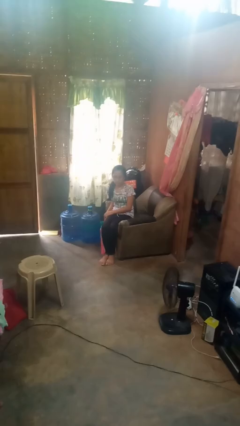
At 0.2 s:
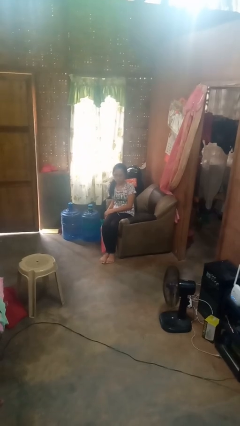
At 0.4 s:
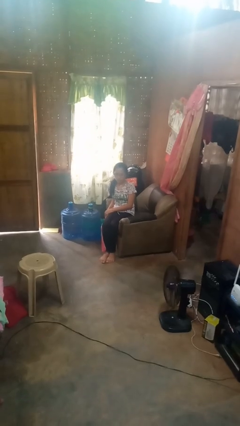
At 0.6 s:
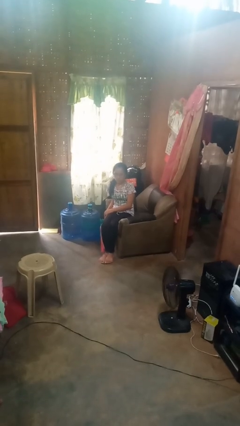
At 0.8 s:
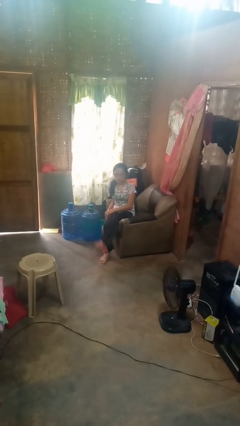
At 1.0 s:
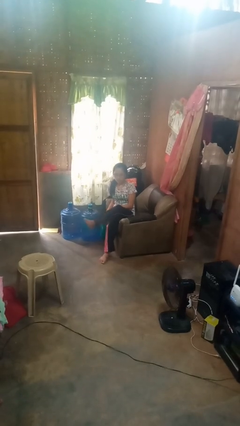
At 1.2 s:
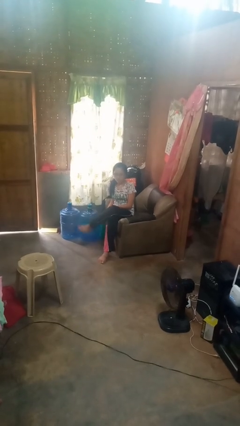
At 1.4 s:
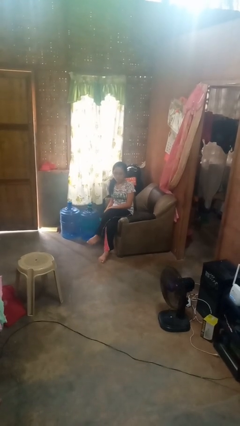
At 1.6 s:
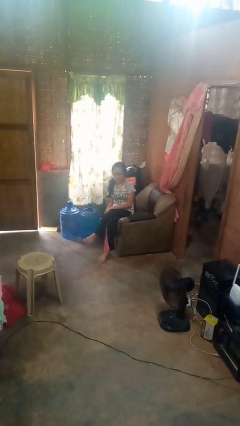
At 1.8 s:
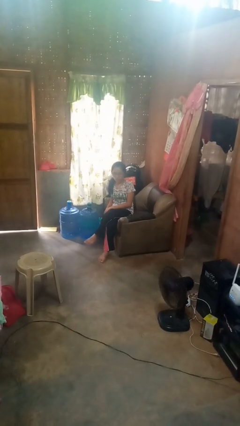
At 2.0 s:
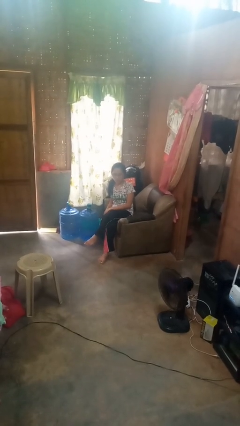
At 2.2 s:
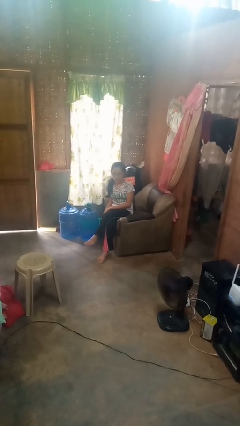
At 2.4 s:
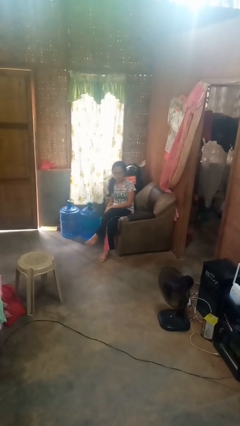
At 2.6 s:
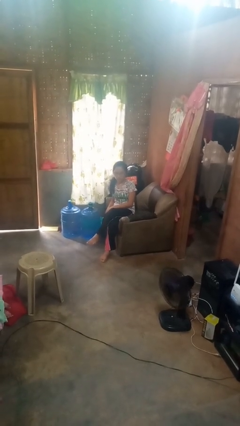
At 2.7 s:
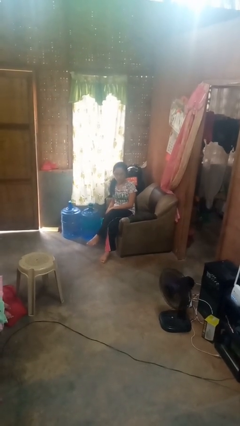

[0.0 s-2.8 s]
person crosses legs

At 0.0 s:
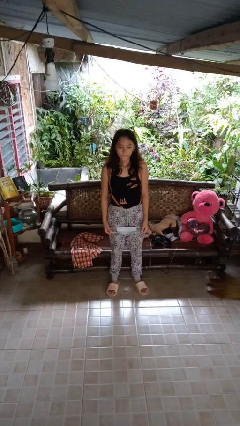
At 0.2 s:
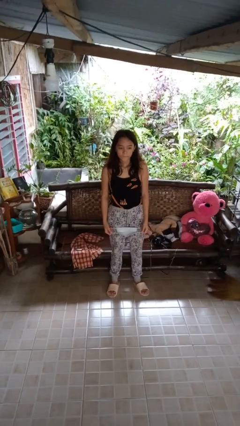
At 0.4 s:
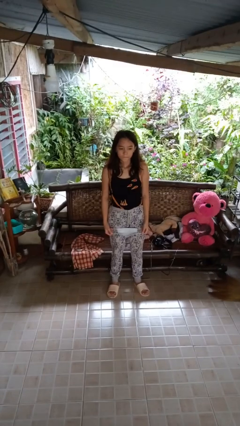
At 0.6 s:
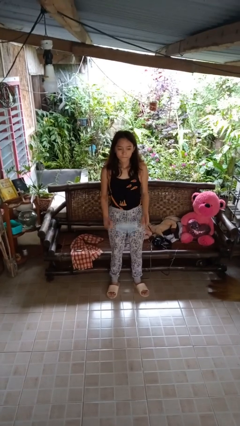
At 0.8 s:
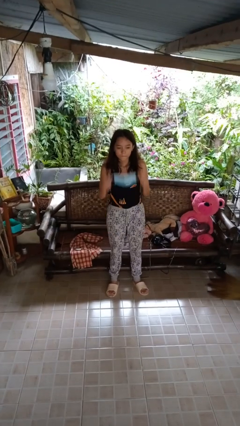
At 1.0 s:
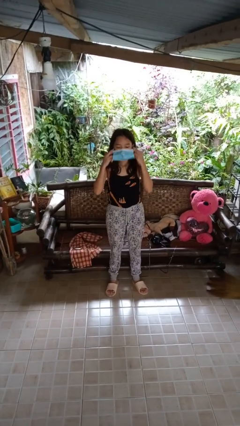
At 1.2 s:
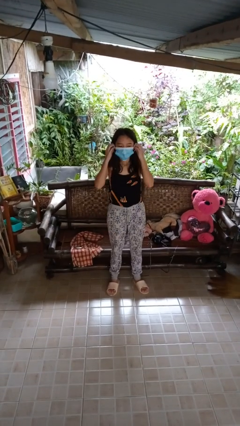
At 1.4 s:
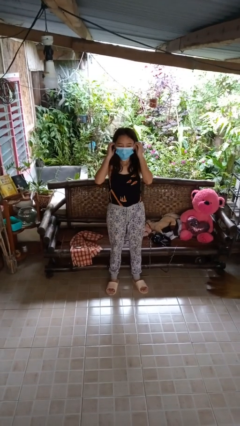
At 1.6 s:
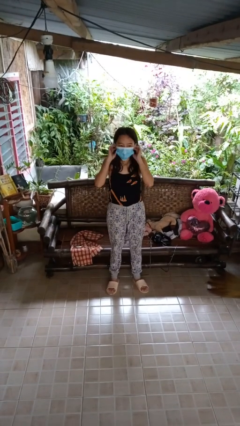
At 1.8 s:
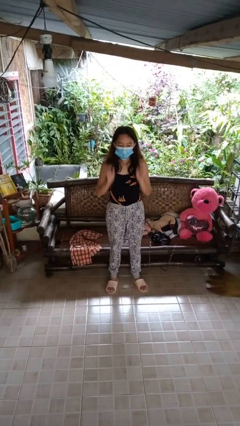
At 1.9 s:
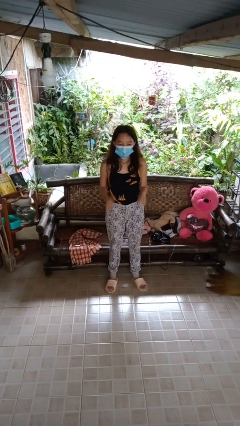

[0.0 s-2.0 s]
person puts on facemask

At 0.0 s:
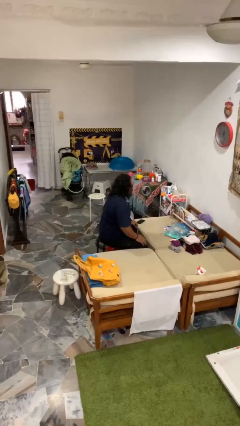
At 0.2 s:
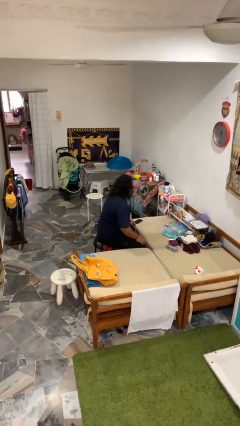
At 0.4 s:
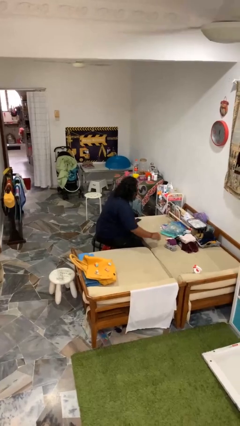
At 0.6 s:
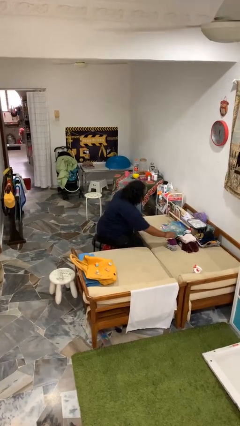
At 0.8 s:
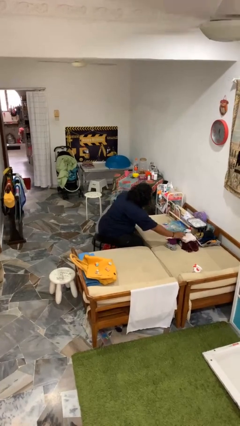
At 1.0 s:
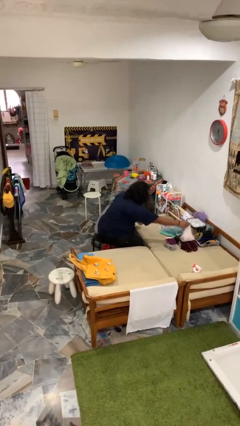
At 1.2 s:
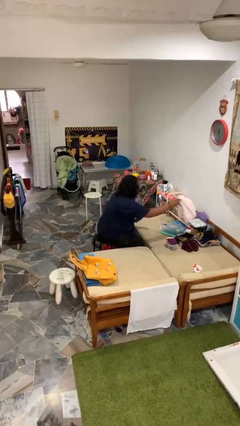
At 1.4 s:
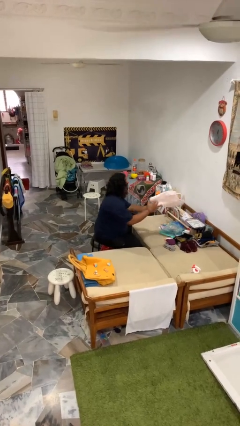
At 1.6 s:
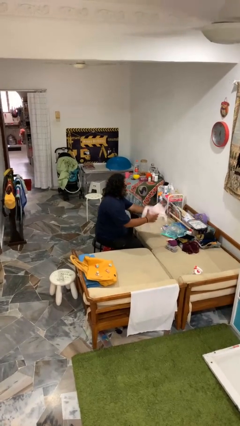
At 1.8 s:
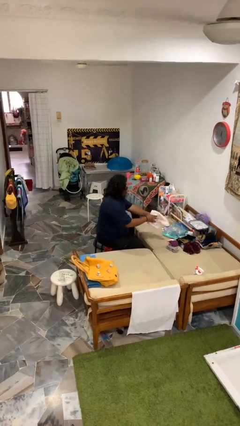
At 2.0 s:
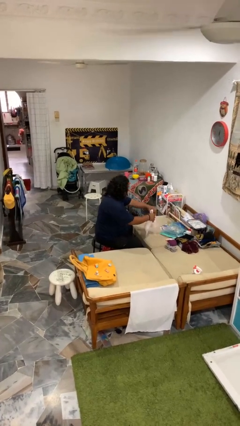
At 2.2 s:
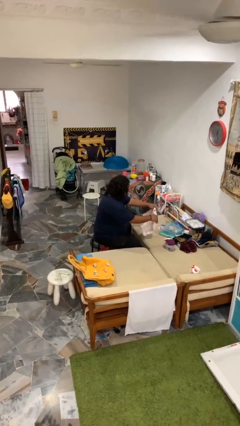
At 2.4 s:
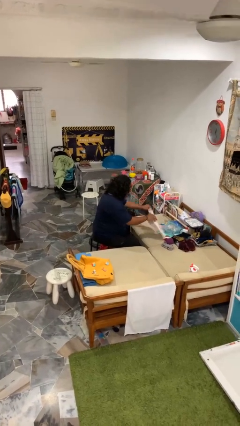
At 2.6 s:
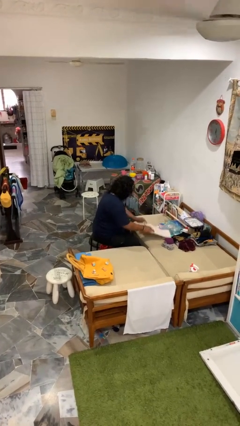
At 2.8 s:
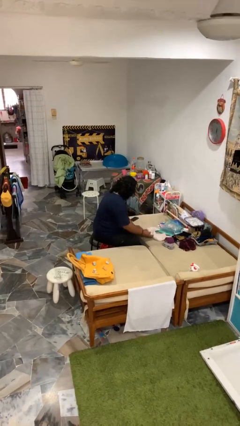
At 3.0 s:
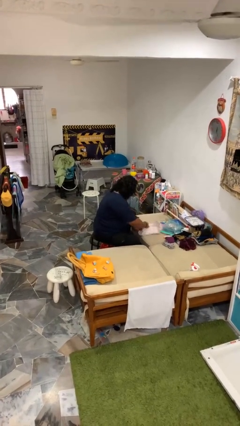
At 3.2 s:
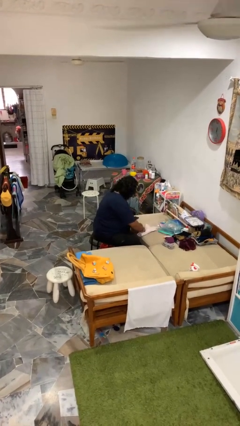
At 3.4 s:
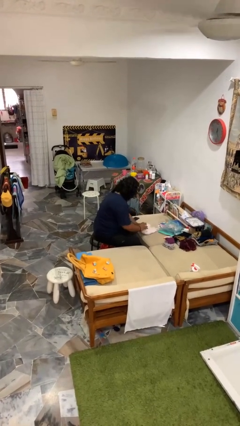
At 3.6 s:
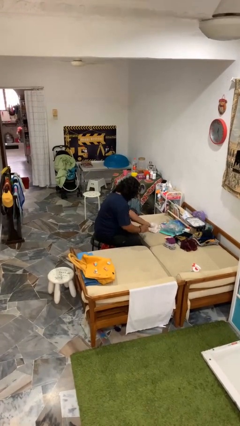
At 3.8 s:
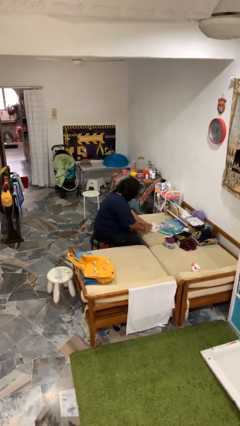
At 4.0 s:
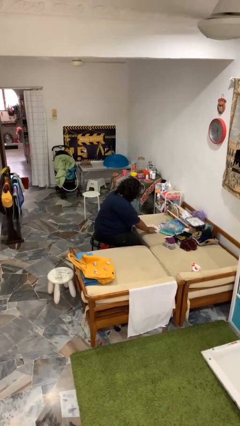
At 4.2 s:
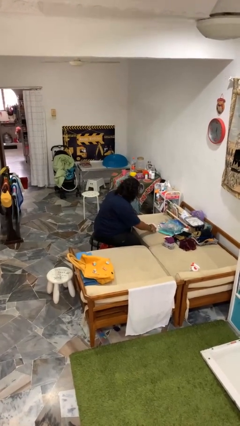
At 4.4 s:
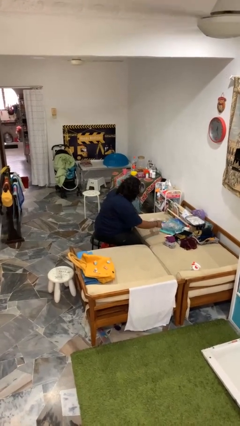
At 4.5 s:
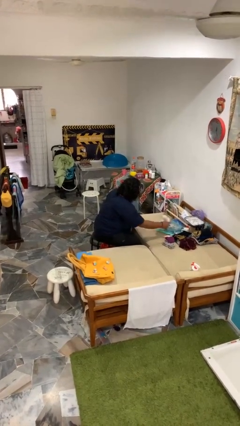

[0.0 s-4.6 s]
person folds pants

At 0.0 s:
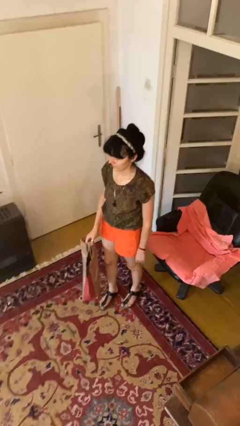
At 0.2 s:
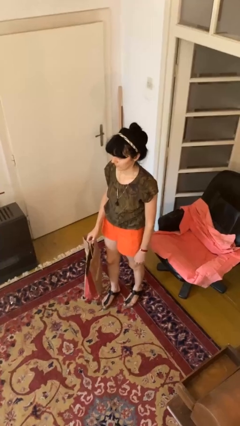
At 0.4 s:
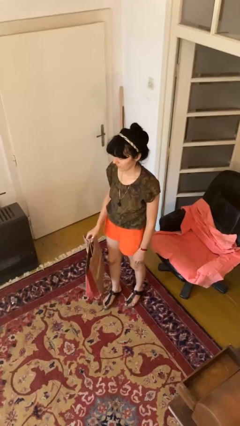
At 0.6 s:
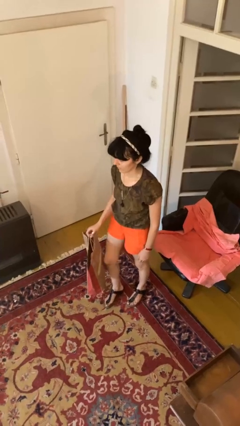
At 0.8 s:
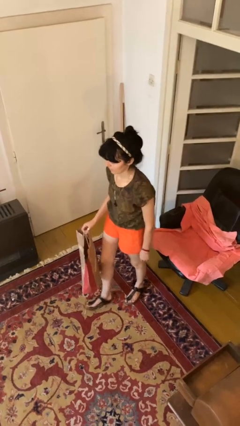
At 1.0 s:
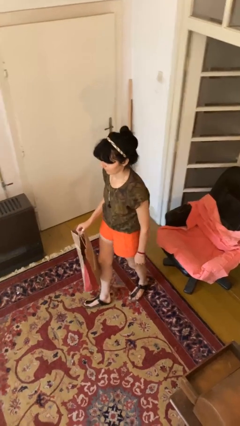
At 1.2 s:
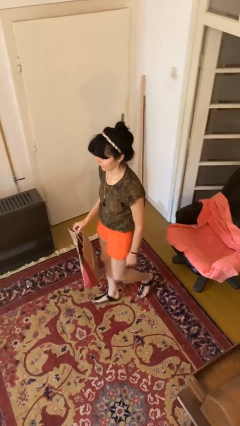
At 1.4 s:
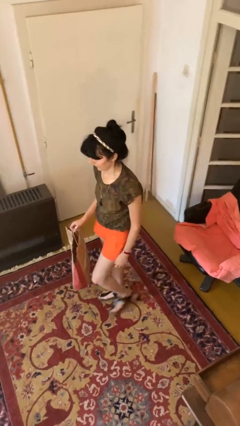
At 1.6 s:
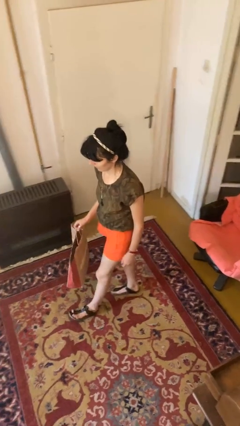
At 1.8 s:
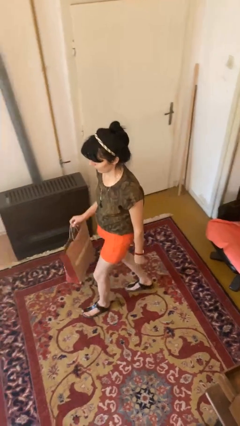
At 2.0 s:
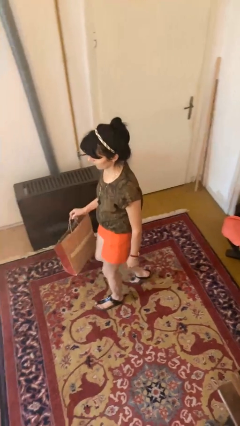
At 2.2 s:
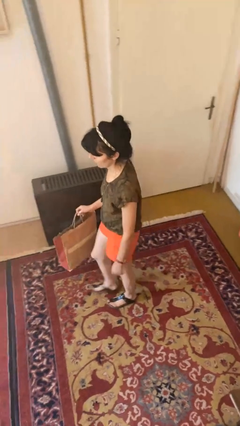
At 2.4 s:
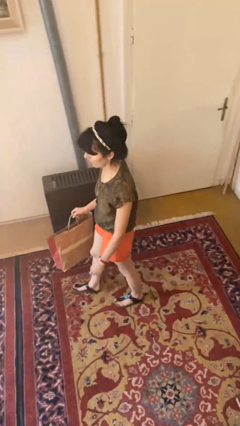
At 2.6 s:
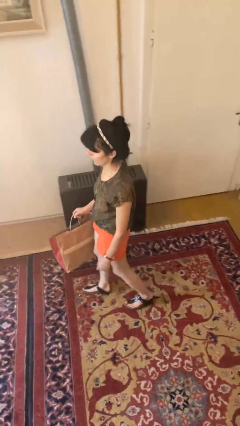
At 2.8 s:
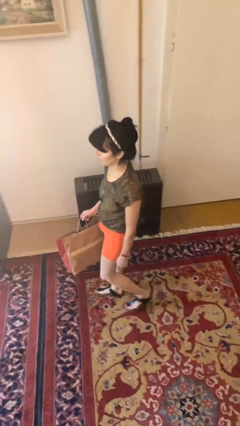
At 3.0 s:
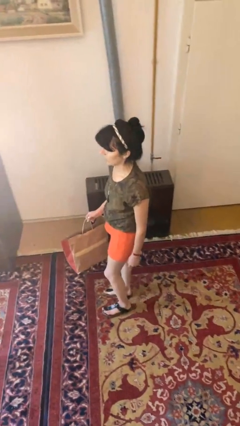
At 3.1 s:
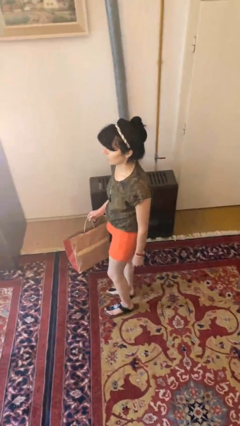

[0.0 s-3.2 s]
person carries groceries

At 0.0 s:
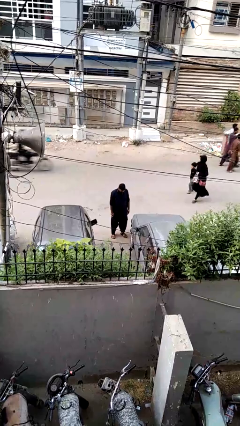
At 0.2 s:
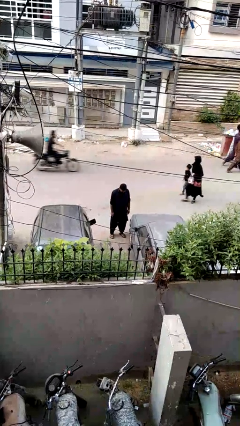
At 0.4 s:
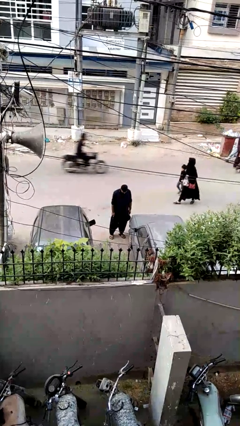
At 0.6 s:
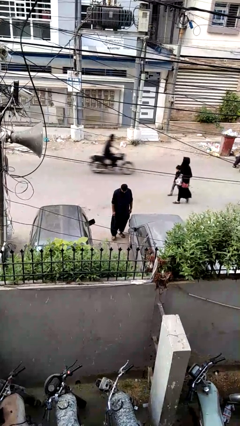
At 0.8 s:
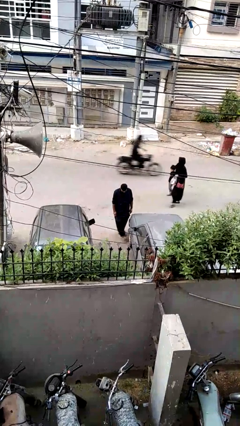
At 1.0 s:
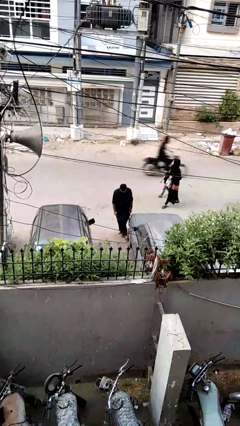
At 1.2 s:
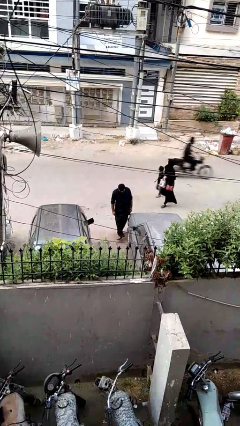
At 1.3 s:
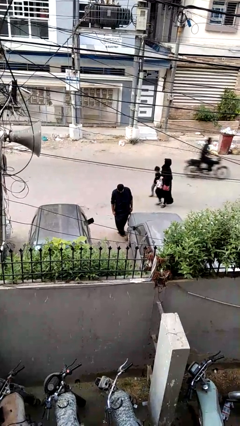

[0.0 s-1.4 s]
person kicks car tires

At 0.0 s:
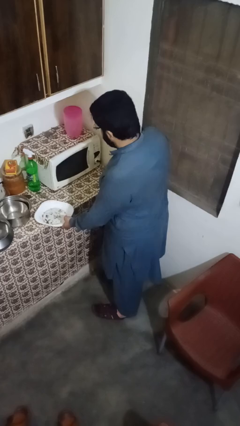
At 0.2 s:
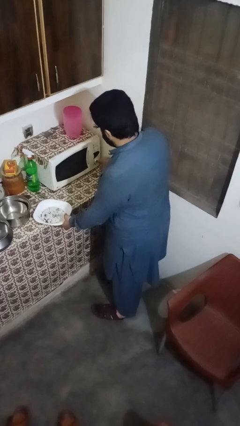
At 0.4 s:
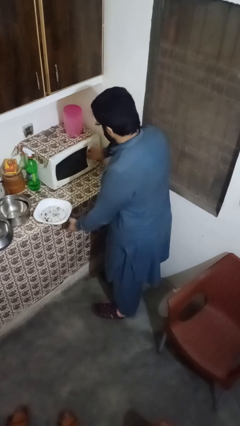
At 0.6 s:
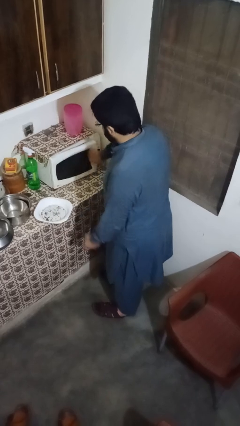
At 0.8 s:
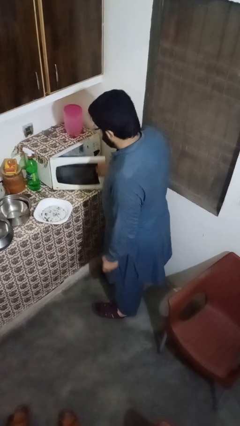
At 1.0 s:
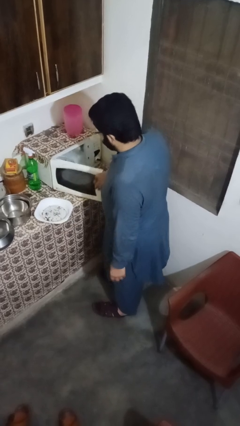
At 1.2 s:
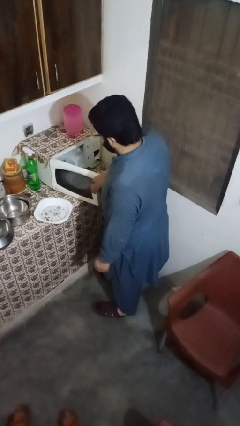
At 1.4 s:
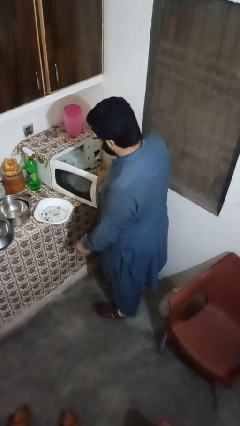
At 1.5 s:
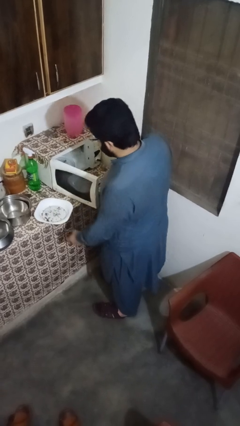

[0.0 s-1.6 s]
person opens microwave

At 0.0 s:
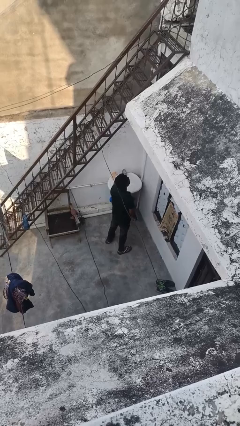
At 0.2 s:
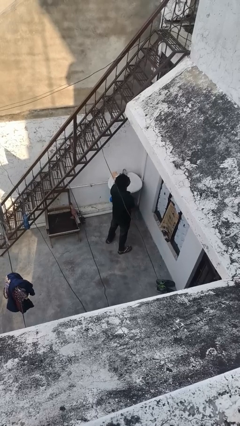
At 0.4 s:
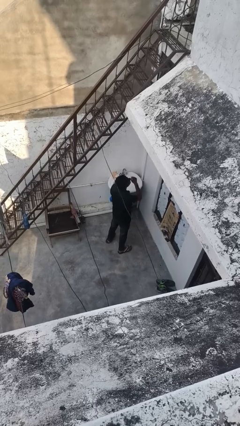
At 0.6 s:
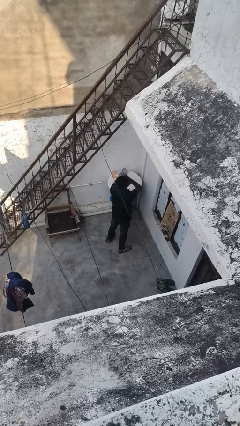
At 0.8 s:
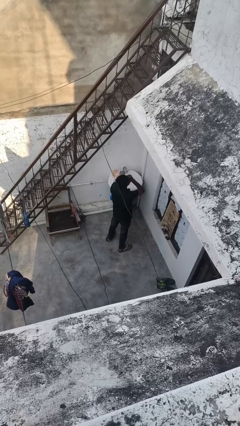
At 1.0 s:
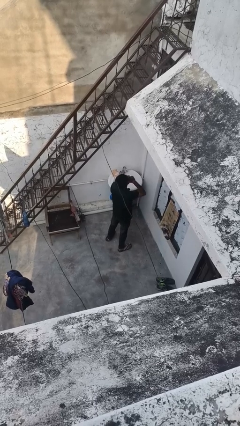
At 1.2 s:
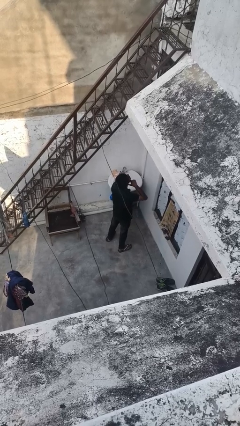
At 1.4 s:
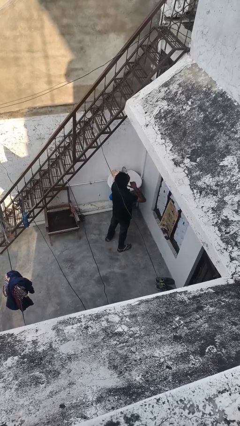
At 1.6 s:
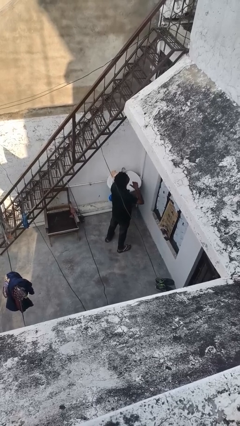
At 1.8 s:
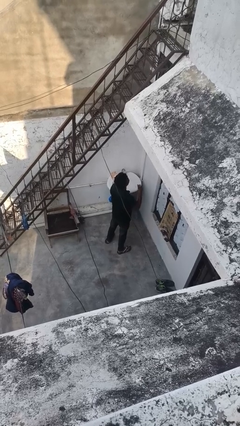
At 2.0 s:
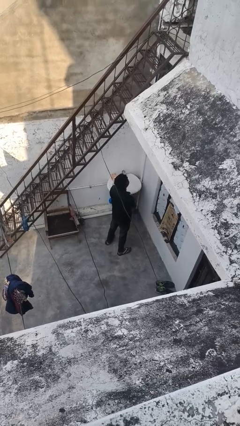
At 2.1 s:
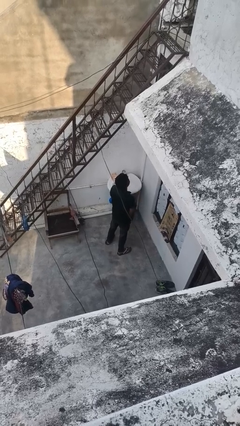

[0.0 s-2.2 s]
person gestures cut
